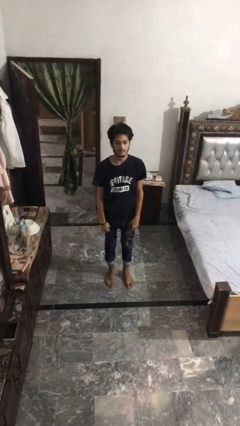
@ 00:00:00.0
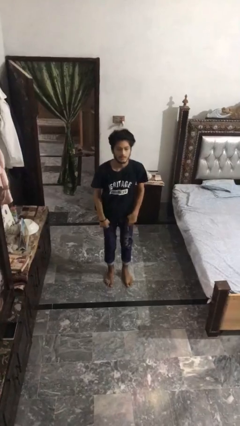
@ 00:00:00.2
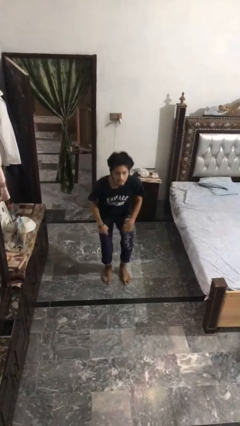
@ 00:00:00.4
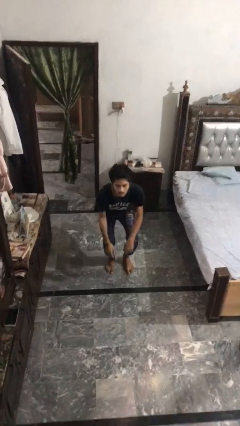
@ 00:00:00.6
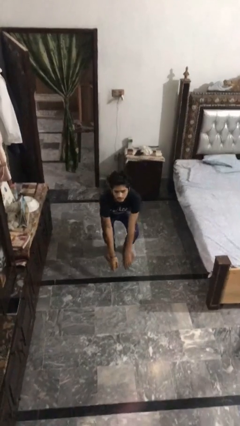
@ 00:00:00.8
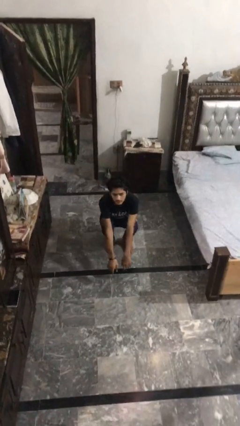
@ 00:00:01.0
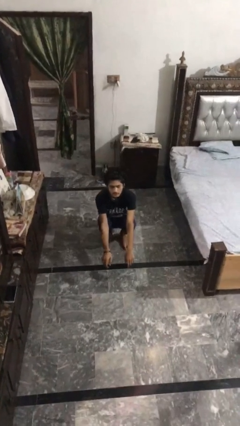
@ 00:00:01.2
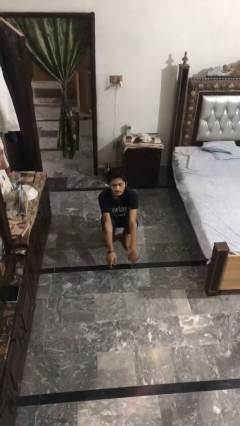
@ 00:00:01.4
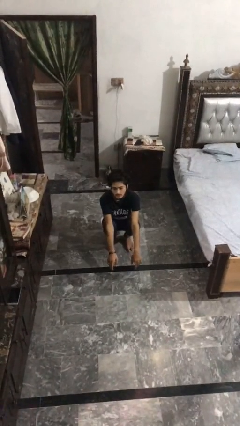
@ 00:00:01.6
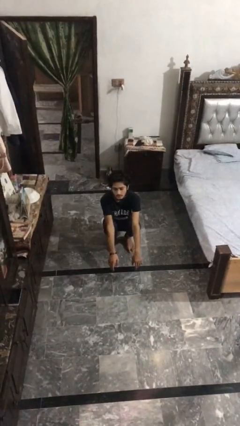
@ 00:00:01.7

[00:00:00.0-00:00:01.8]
person squats

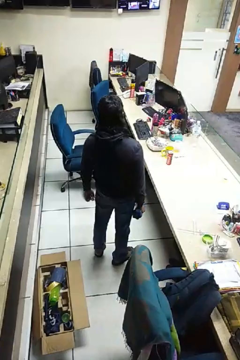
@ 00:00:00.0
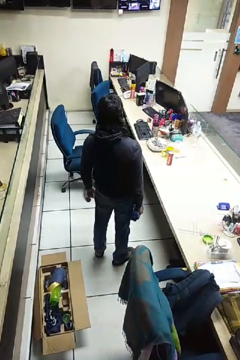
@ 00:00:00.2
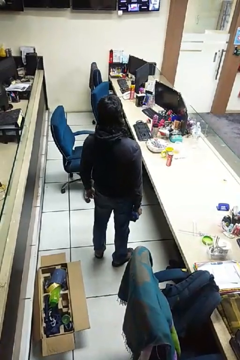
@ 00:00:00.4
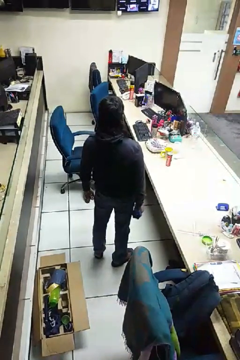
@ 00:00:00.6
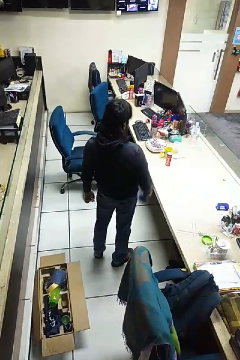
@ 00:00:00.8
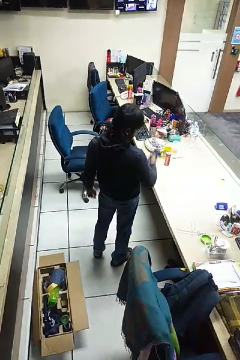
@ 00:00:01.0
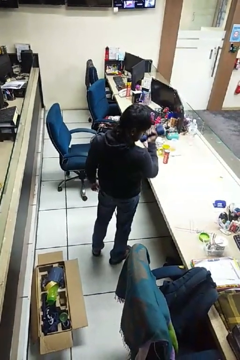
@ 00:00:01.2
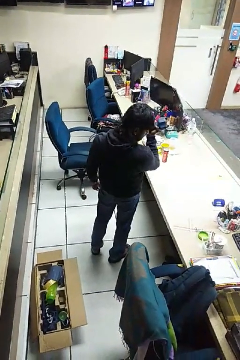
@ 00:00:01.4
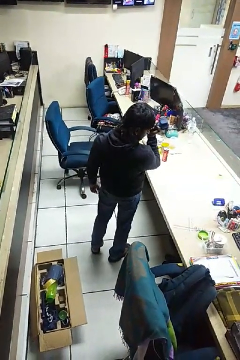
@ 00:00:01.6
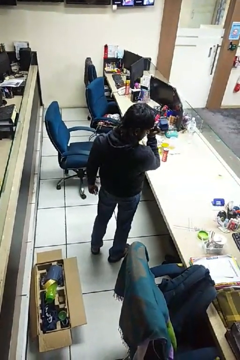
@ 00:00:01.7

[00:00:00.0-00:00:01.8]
person lifts dumbbells

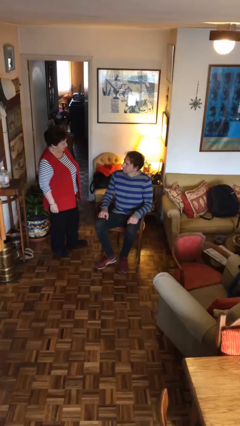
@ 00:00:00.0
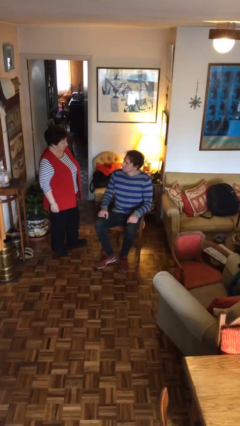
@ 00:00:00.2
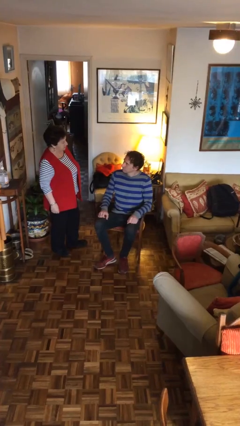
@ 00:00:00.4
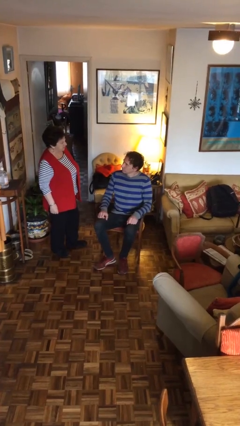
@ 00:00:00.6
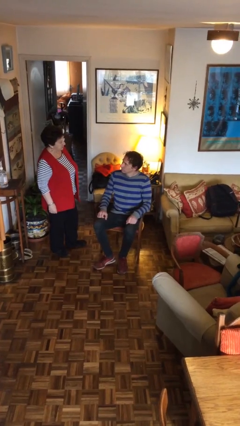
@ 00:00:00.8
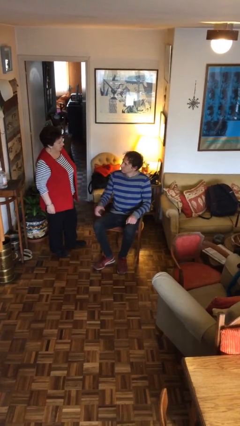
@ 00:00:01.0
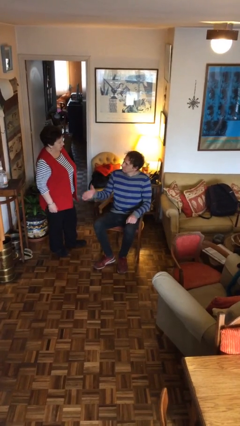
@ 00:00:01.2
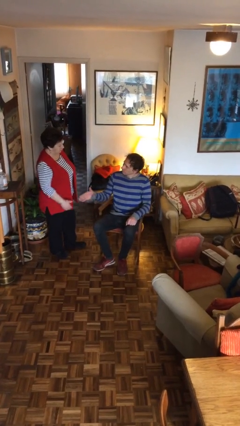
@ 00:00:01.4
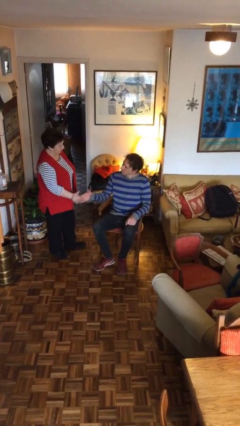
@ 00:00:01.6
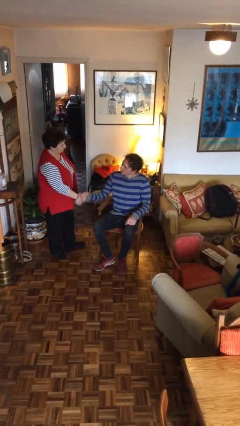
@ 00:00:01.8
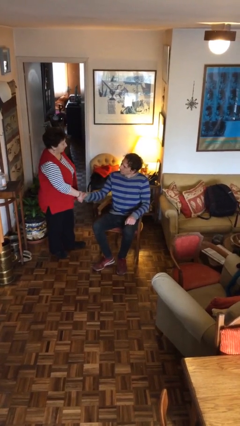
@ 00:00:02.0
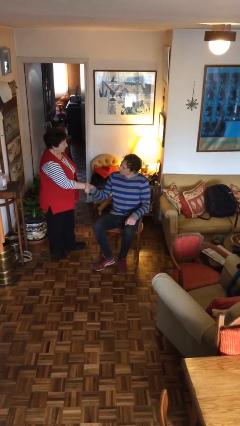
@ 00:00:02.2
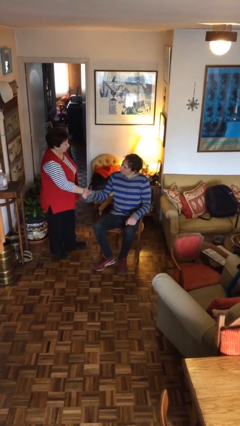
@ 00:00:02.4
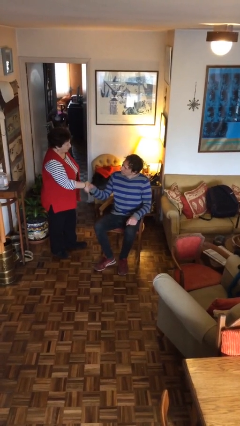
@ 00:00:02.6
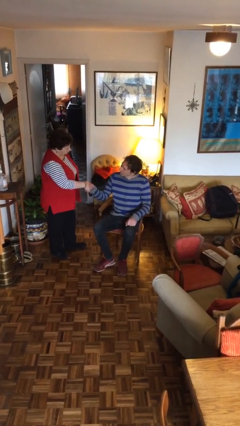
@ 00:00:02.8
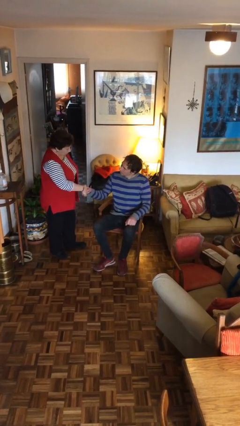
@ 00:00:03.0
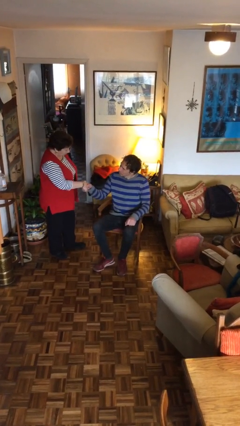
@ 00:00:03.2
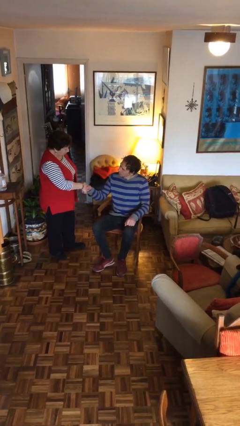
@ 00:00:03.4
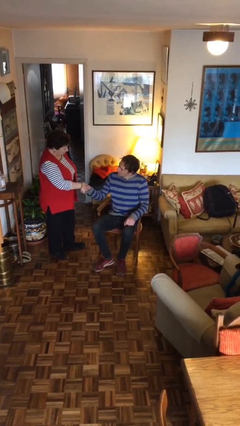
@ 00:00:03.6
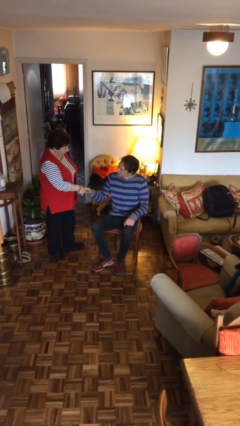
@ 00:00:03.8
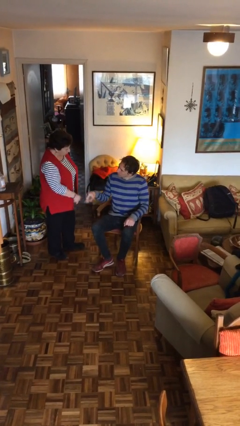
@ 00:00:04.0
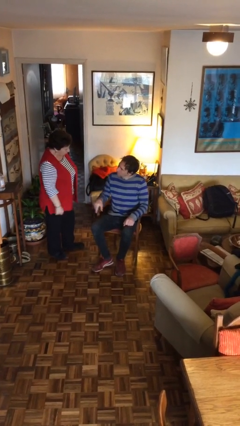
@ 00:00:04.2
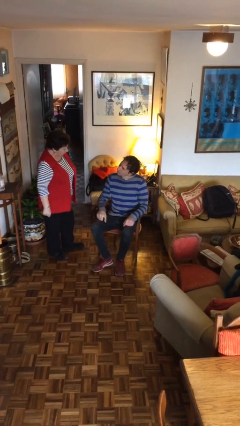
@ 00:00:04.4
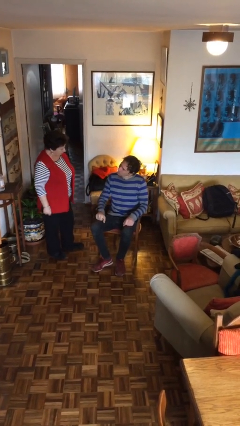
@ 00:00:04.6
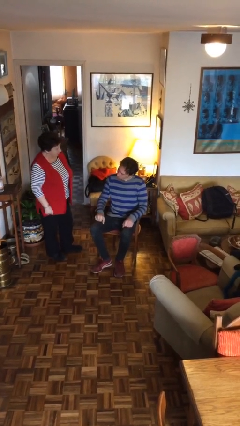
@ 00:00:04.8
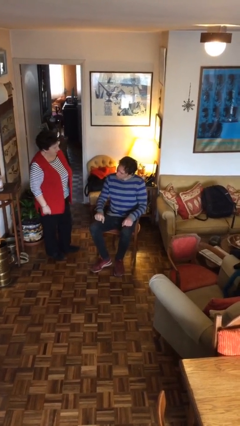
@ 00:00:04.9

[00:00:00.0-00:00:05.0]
person shakes hand

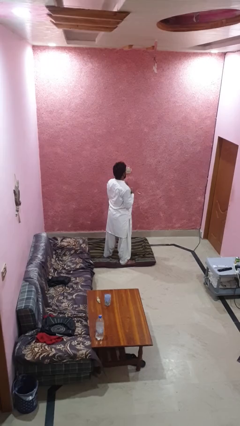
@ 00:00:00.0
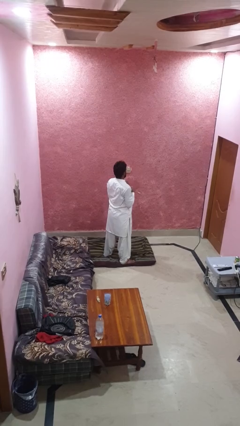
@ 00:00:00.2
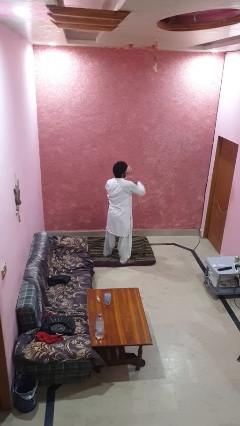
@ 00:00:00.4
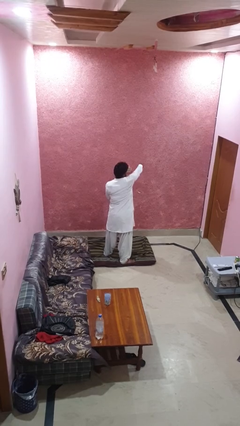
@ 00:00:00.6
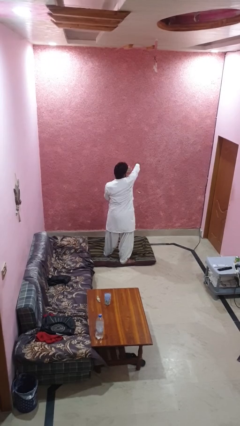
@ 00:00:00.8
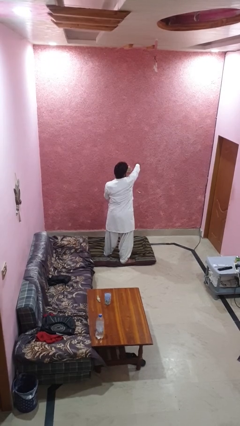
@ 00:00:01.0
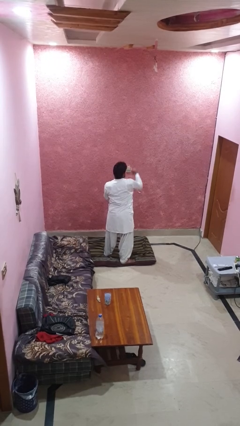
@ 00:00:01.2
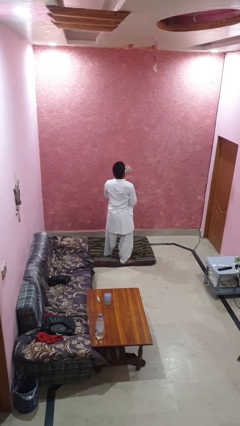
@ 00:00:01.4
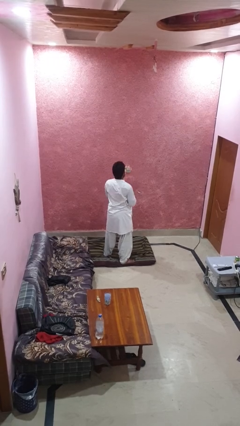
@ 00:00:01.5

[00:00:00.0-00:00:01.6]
person punches

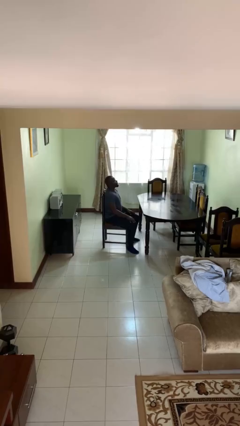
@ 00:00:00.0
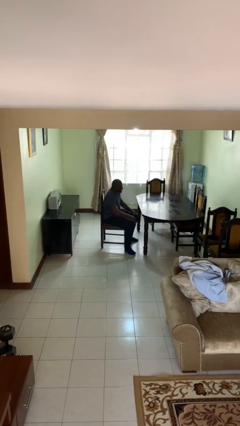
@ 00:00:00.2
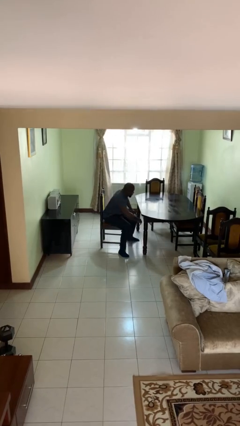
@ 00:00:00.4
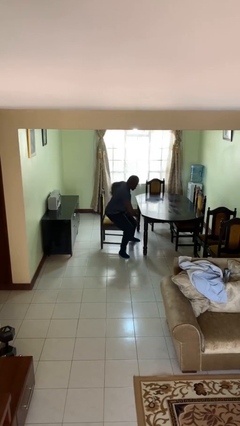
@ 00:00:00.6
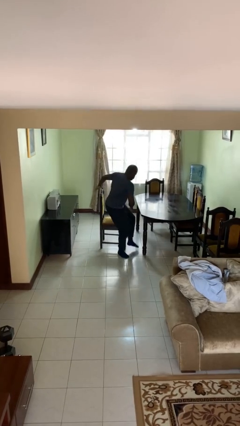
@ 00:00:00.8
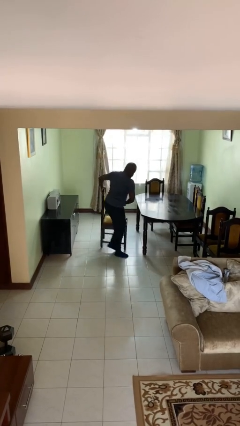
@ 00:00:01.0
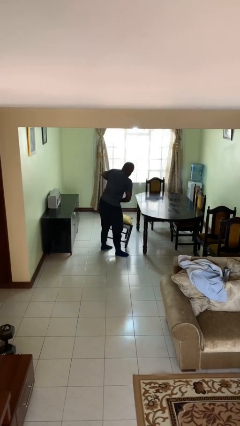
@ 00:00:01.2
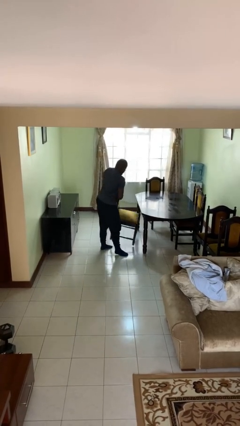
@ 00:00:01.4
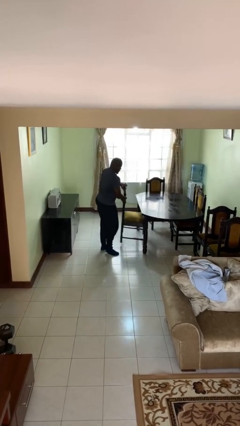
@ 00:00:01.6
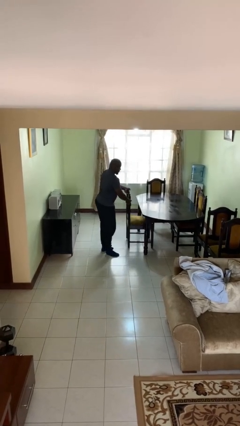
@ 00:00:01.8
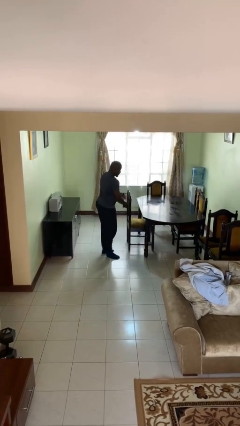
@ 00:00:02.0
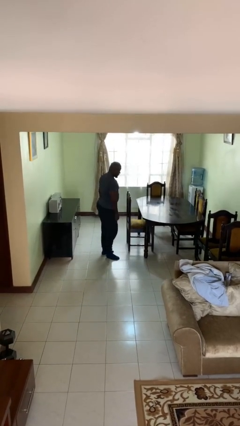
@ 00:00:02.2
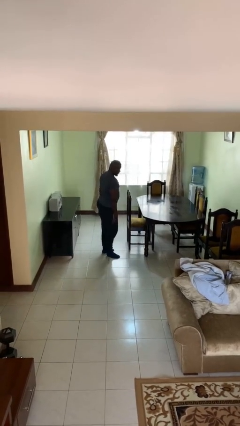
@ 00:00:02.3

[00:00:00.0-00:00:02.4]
person stands up

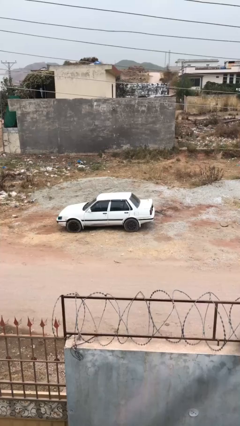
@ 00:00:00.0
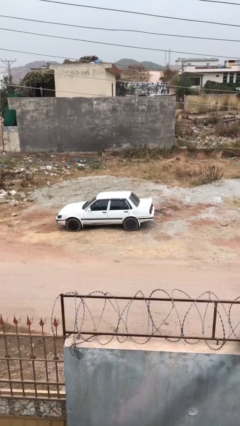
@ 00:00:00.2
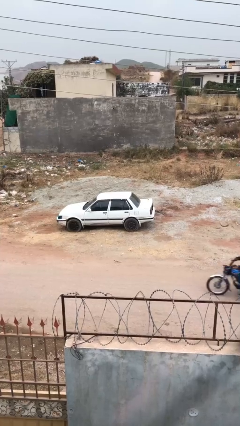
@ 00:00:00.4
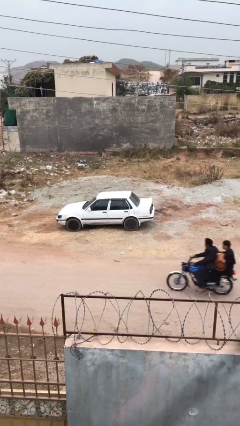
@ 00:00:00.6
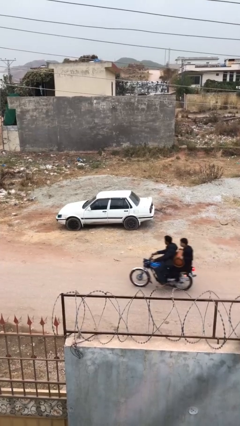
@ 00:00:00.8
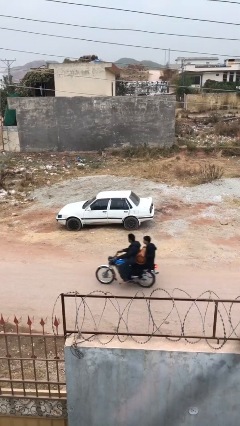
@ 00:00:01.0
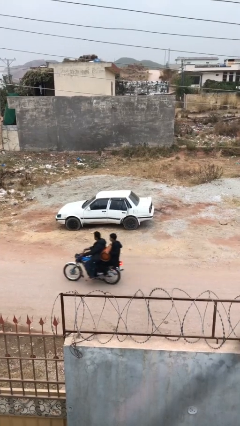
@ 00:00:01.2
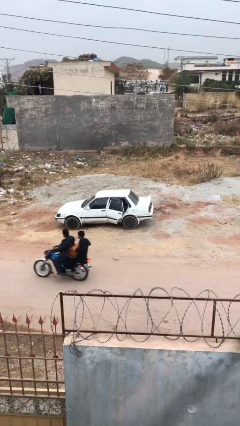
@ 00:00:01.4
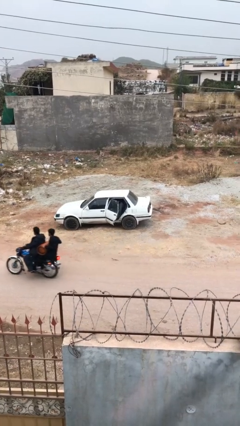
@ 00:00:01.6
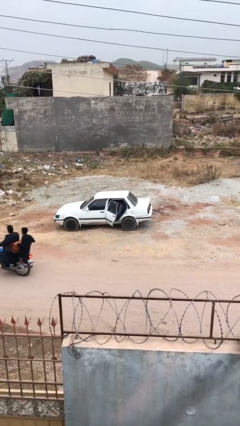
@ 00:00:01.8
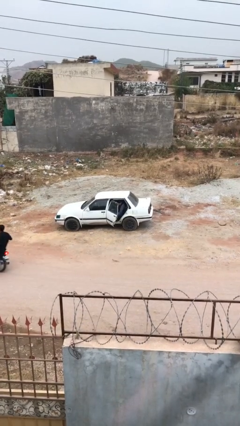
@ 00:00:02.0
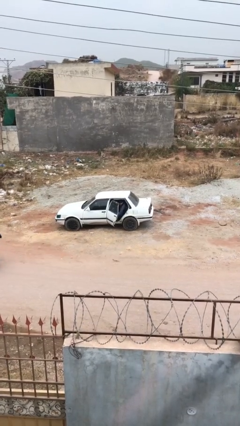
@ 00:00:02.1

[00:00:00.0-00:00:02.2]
person opens car door

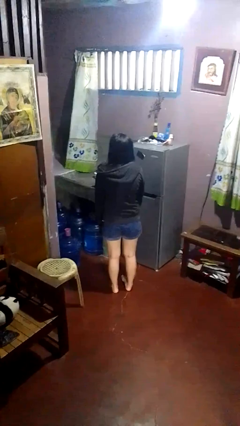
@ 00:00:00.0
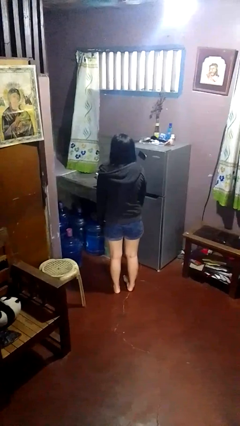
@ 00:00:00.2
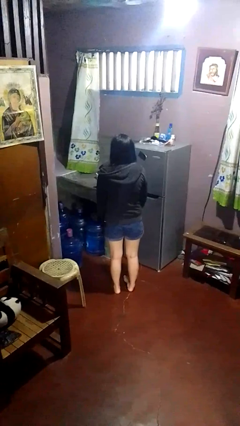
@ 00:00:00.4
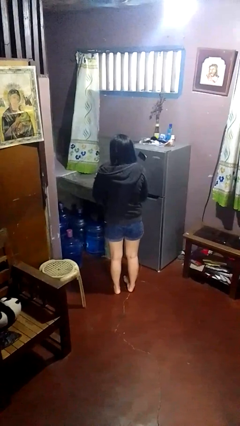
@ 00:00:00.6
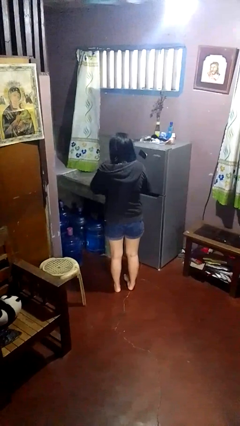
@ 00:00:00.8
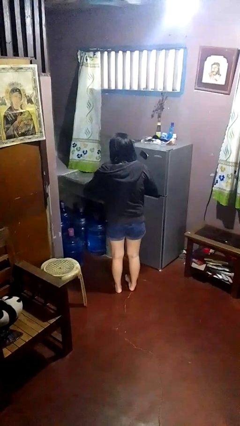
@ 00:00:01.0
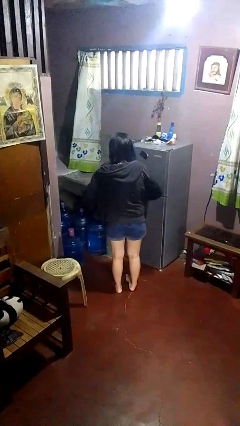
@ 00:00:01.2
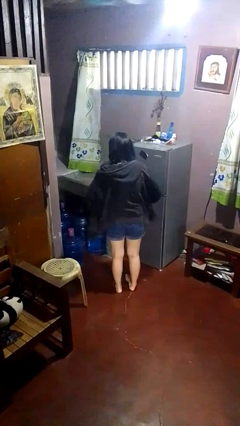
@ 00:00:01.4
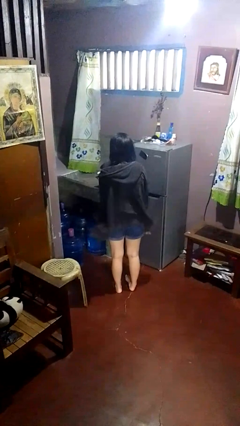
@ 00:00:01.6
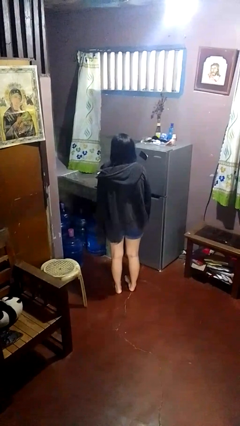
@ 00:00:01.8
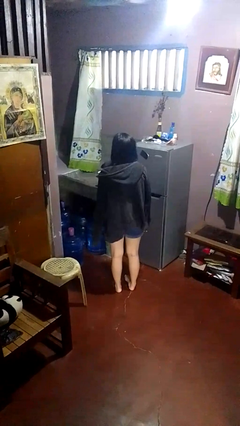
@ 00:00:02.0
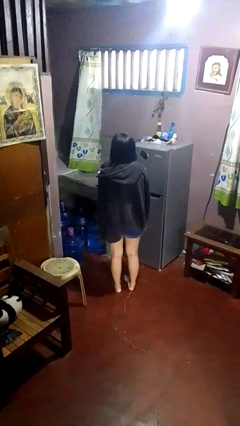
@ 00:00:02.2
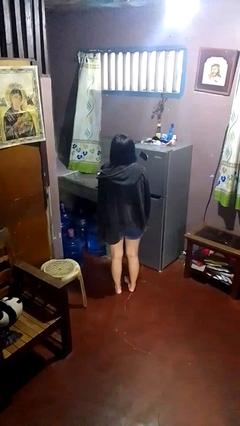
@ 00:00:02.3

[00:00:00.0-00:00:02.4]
person unzips jacket
